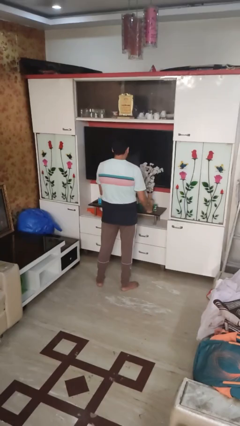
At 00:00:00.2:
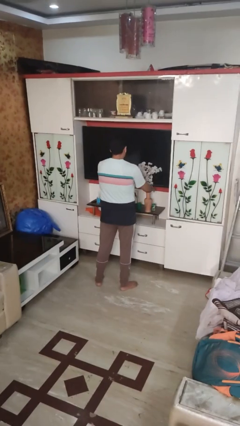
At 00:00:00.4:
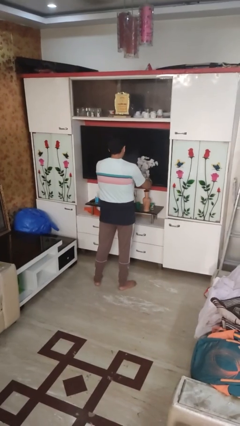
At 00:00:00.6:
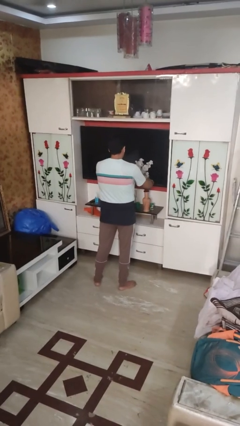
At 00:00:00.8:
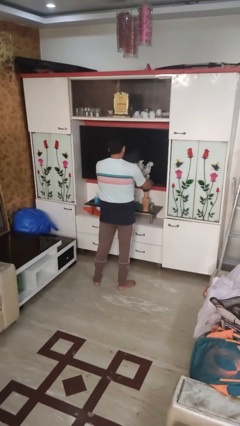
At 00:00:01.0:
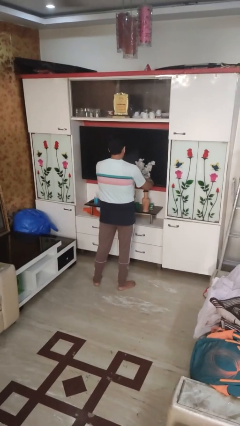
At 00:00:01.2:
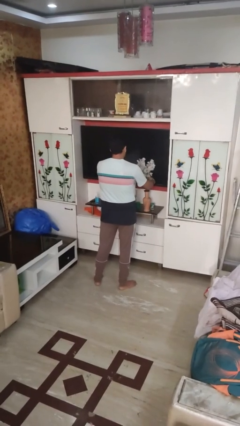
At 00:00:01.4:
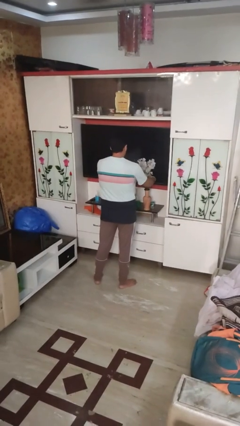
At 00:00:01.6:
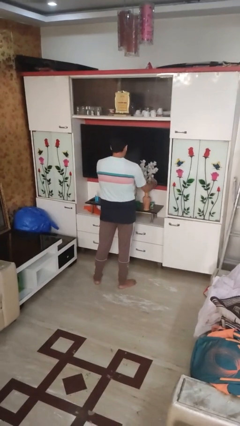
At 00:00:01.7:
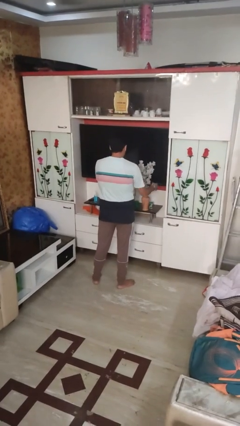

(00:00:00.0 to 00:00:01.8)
person arranges flowers in vase

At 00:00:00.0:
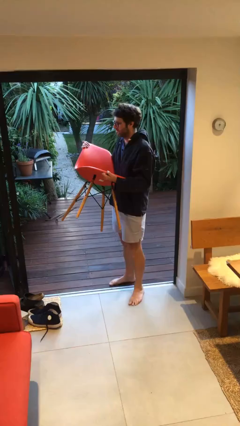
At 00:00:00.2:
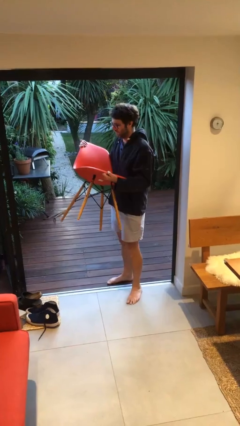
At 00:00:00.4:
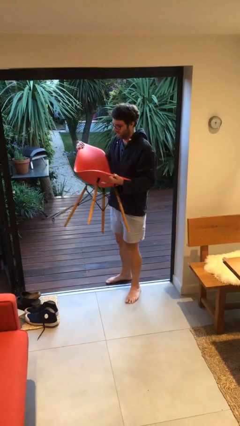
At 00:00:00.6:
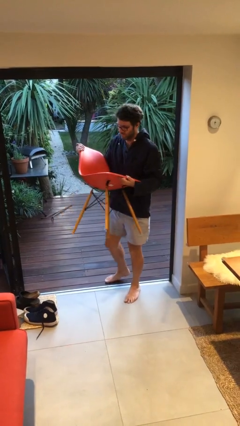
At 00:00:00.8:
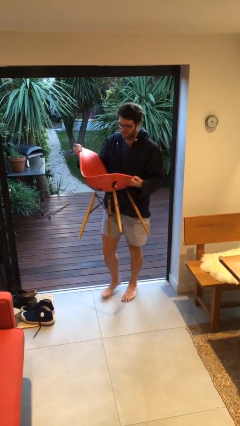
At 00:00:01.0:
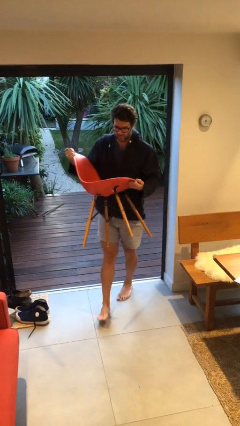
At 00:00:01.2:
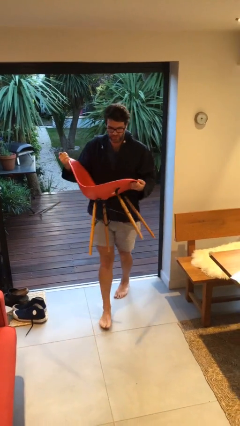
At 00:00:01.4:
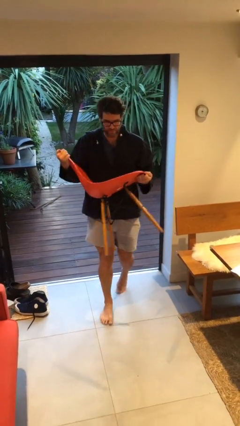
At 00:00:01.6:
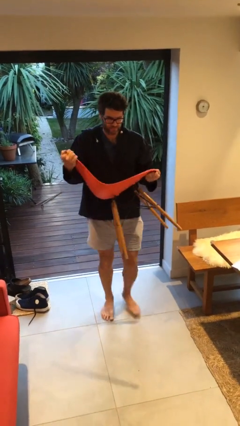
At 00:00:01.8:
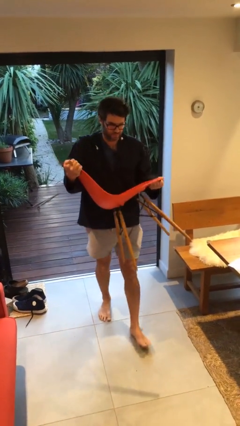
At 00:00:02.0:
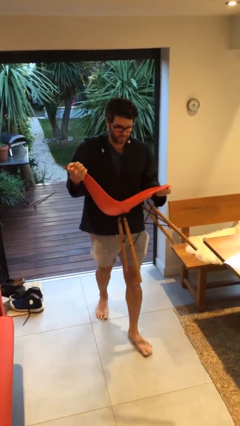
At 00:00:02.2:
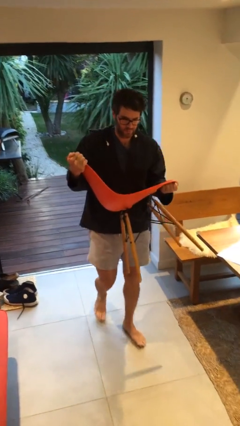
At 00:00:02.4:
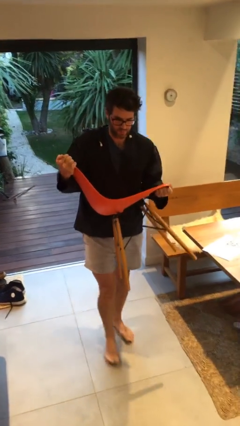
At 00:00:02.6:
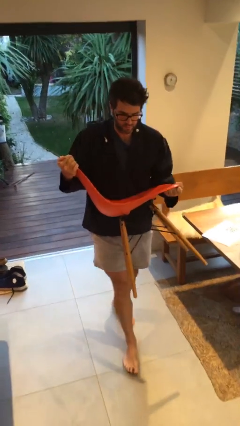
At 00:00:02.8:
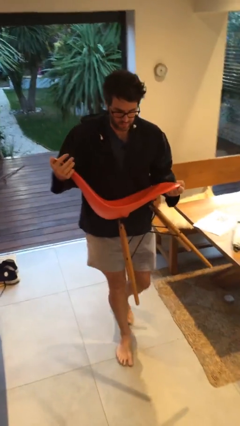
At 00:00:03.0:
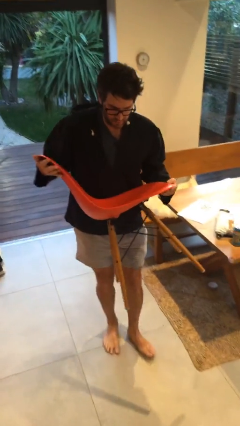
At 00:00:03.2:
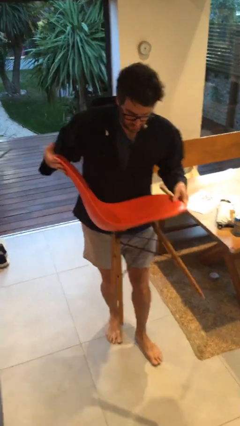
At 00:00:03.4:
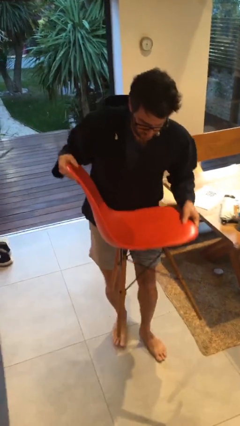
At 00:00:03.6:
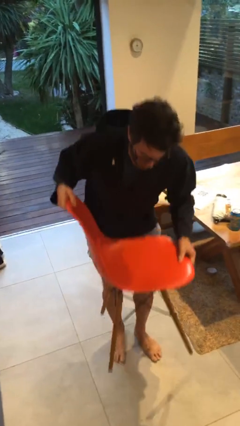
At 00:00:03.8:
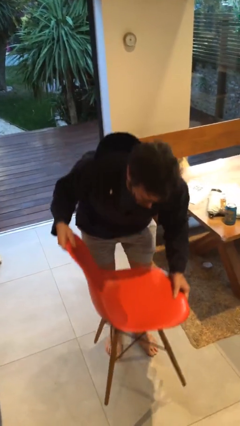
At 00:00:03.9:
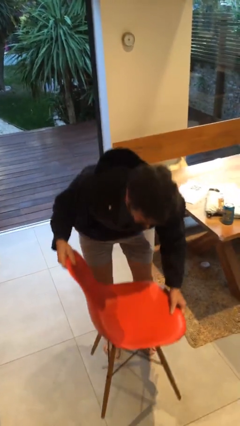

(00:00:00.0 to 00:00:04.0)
person carries heavy object

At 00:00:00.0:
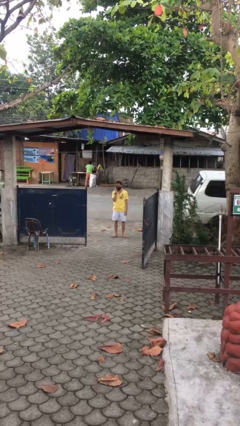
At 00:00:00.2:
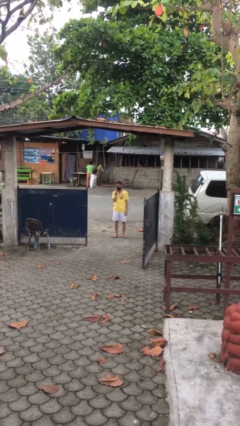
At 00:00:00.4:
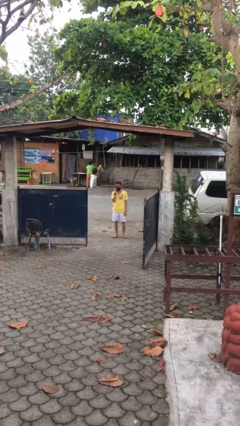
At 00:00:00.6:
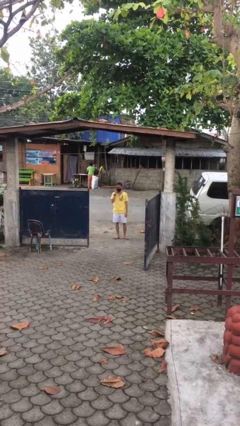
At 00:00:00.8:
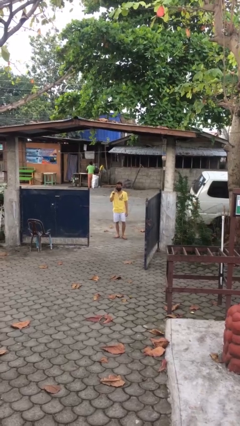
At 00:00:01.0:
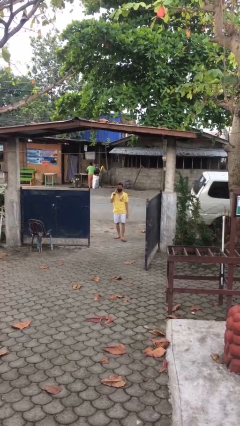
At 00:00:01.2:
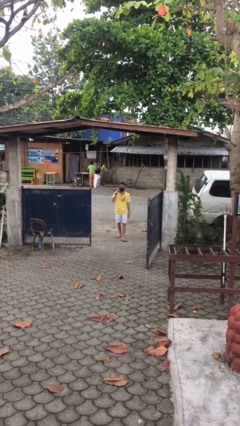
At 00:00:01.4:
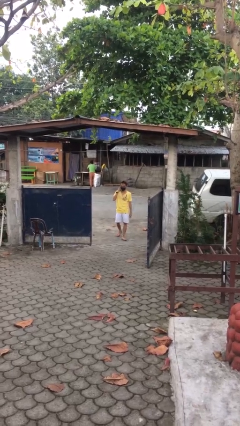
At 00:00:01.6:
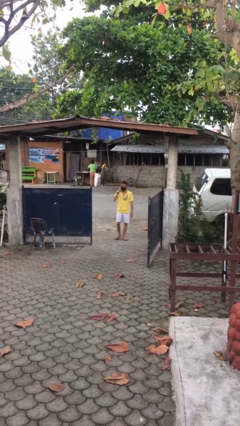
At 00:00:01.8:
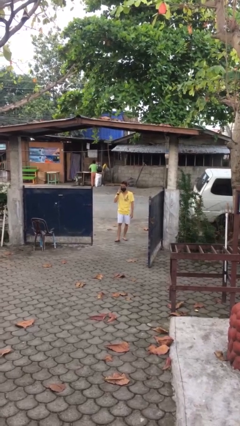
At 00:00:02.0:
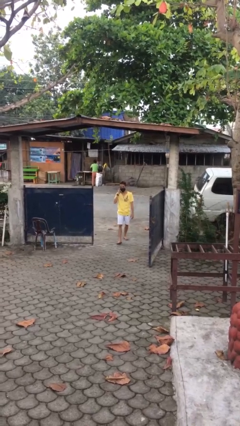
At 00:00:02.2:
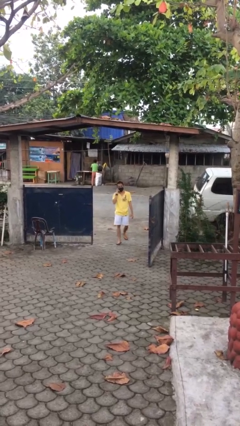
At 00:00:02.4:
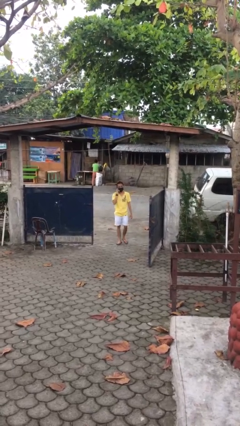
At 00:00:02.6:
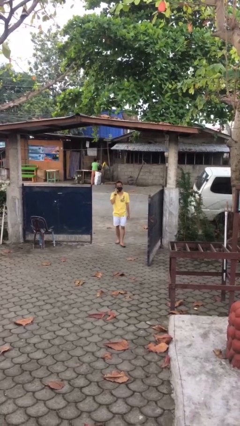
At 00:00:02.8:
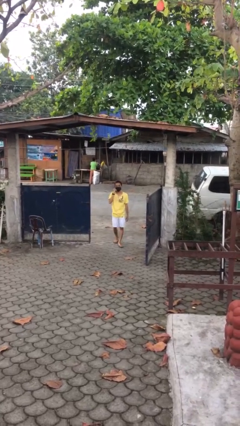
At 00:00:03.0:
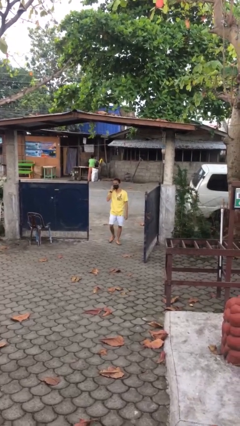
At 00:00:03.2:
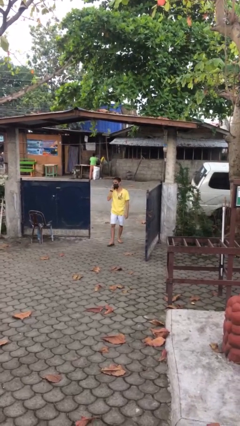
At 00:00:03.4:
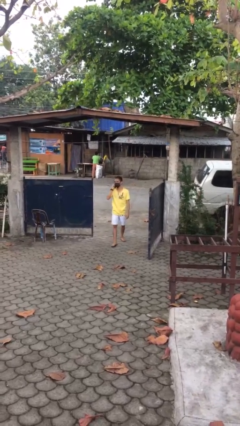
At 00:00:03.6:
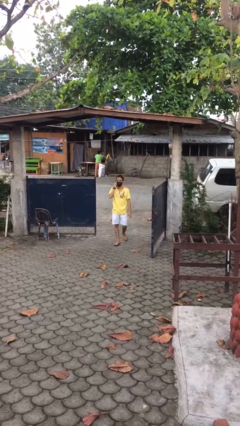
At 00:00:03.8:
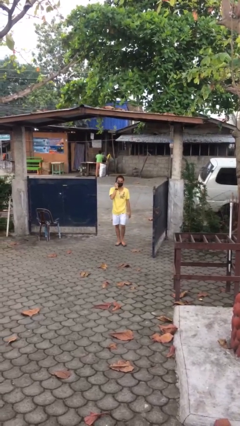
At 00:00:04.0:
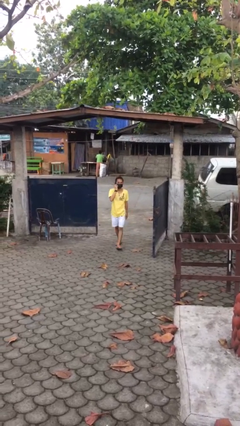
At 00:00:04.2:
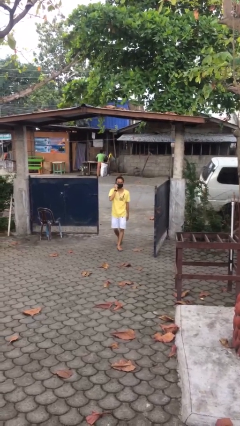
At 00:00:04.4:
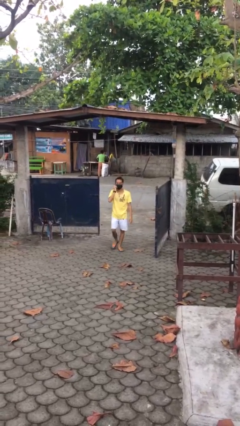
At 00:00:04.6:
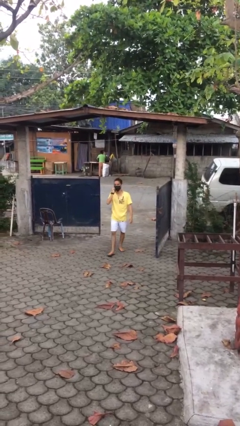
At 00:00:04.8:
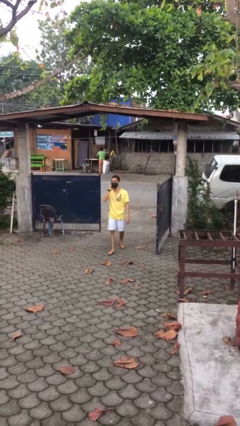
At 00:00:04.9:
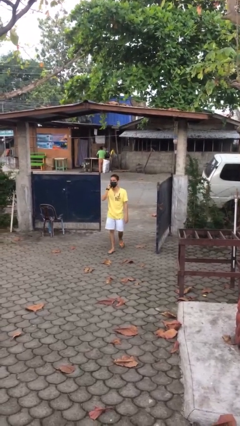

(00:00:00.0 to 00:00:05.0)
person enters scene through structure

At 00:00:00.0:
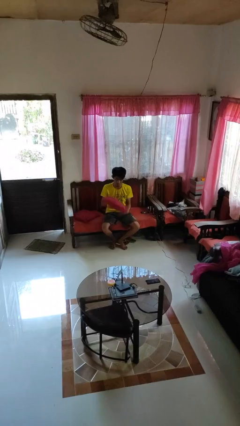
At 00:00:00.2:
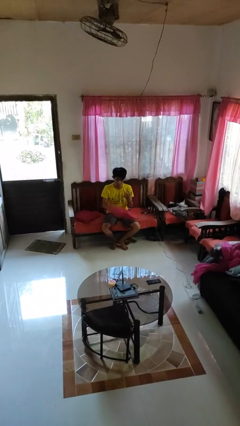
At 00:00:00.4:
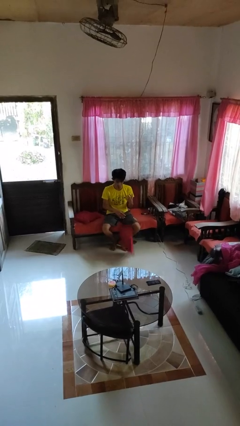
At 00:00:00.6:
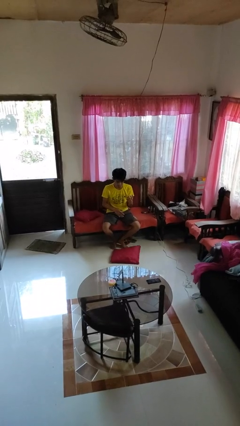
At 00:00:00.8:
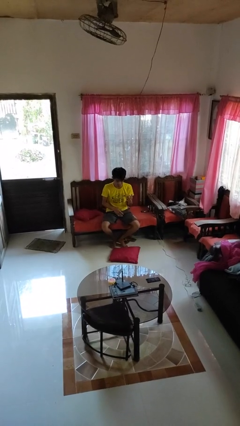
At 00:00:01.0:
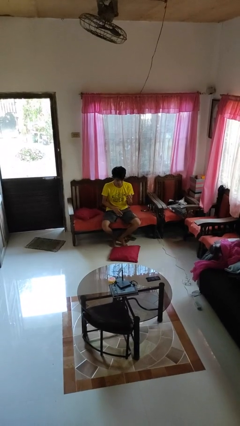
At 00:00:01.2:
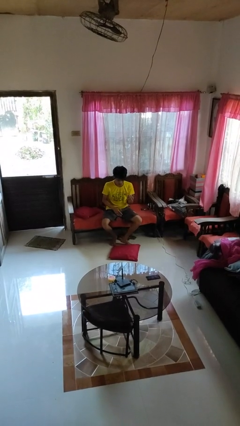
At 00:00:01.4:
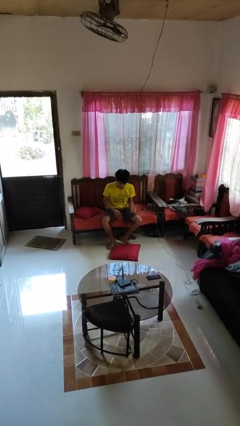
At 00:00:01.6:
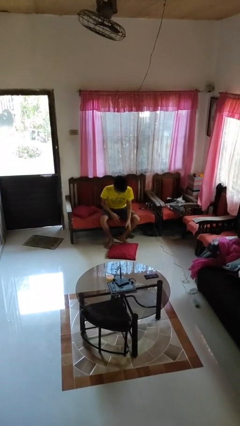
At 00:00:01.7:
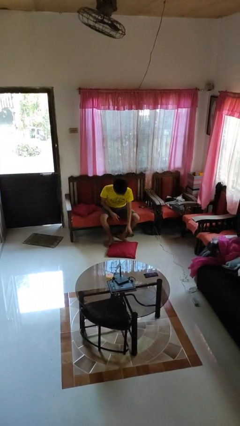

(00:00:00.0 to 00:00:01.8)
person drops object

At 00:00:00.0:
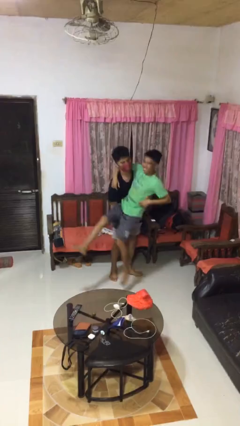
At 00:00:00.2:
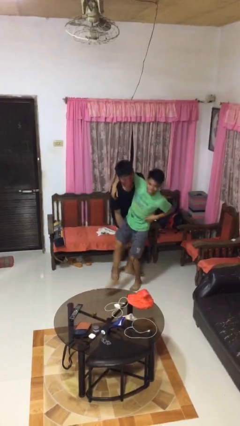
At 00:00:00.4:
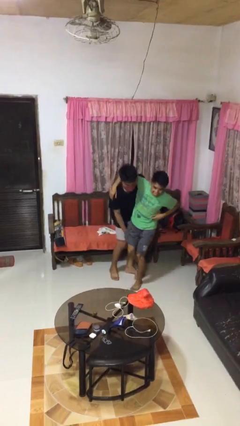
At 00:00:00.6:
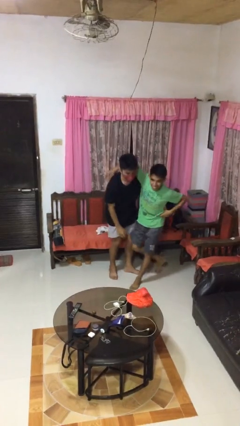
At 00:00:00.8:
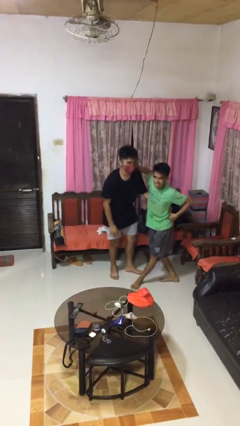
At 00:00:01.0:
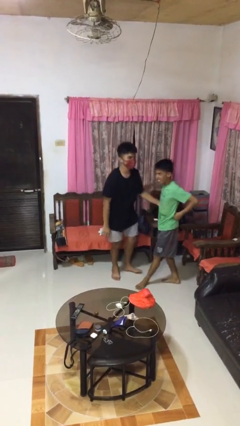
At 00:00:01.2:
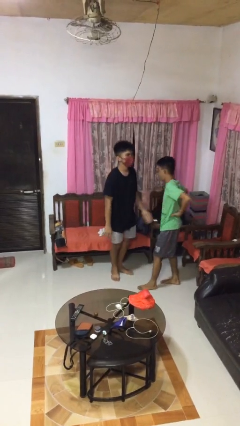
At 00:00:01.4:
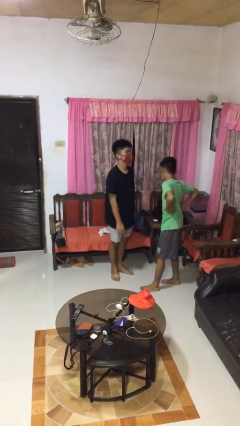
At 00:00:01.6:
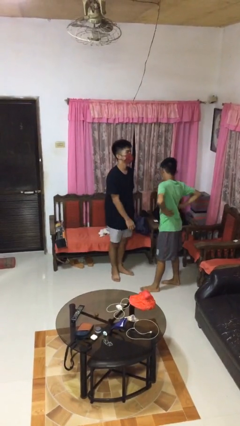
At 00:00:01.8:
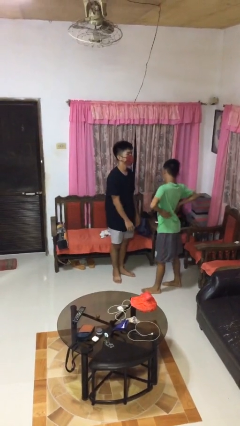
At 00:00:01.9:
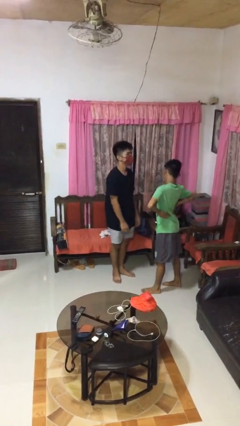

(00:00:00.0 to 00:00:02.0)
person puts down person

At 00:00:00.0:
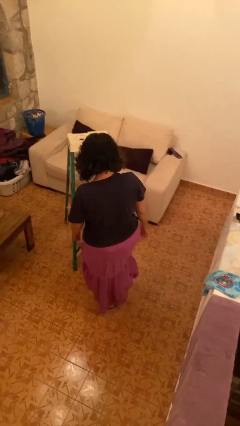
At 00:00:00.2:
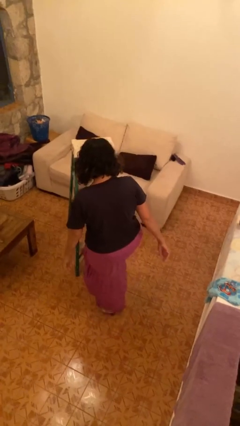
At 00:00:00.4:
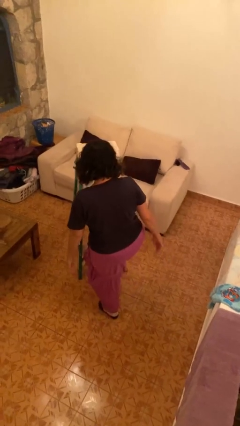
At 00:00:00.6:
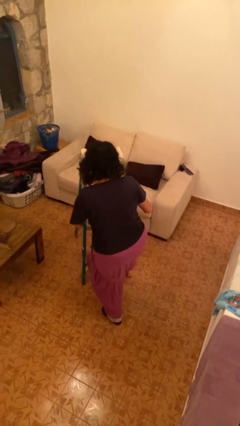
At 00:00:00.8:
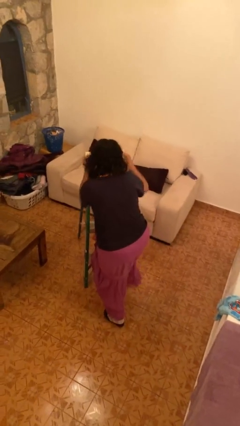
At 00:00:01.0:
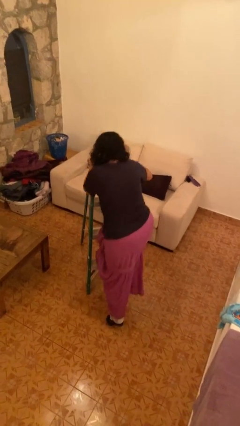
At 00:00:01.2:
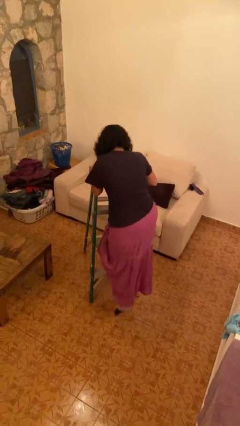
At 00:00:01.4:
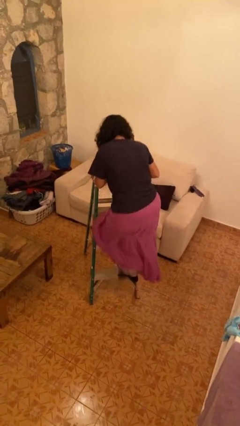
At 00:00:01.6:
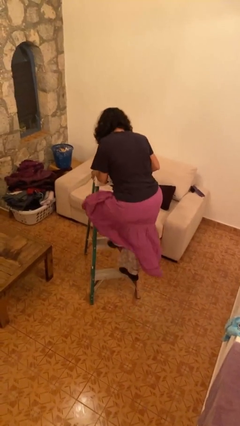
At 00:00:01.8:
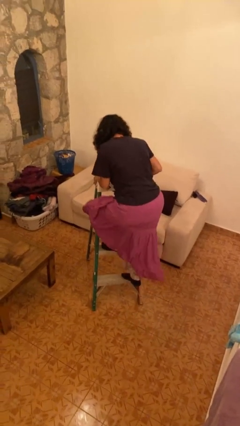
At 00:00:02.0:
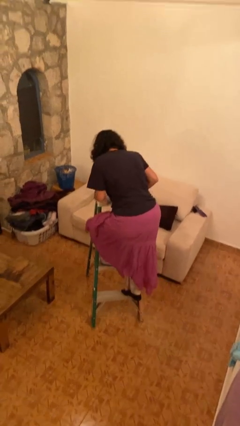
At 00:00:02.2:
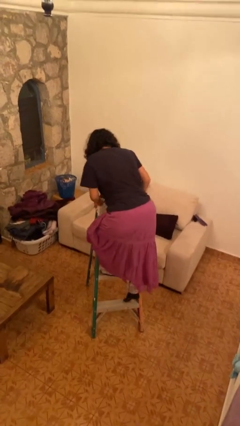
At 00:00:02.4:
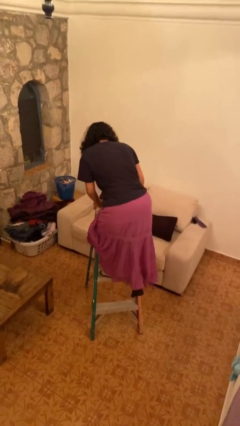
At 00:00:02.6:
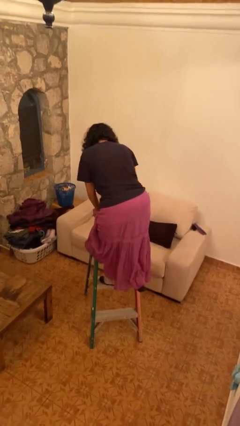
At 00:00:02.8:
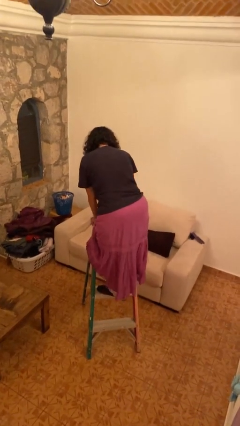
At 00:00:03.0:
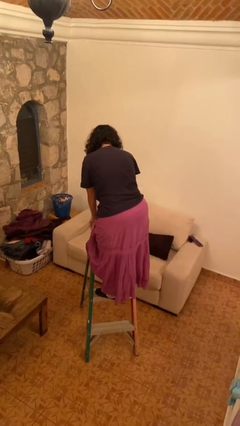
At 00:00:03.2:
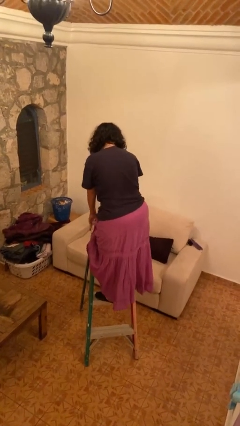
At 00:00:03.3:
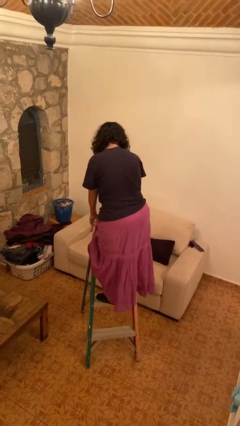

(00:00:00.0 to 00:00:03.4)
person climbs up ladder
